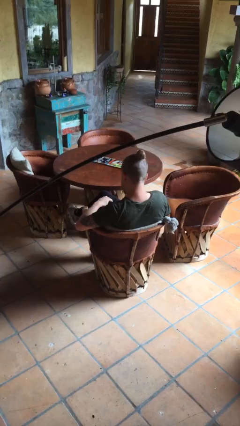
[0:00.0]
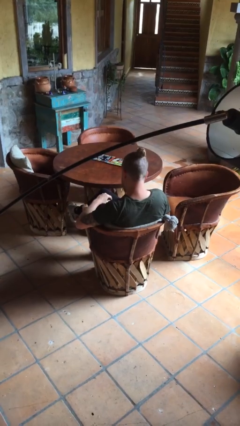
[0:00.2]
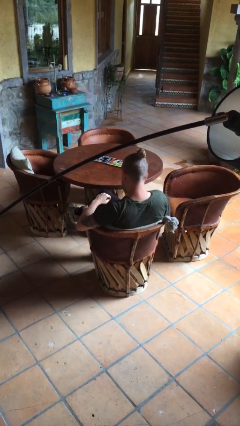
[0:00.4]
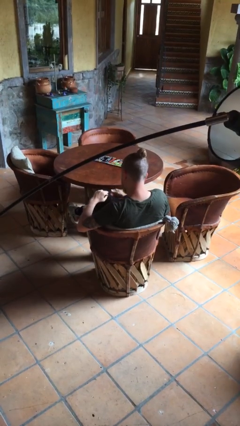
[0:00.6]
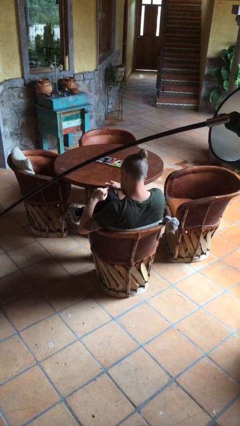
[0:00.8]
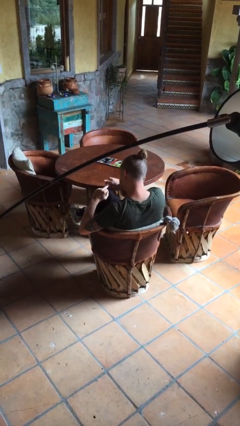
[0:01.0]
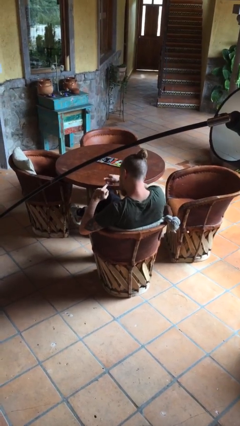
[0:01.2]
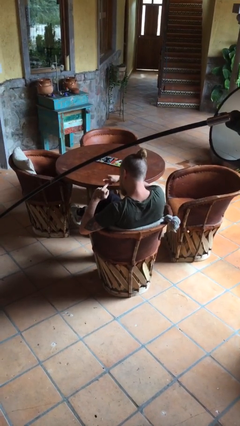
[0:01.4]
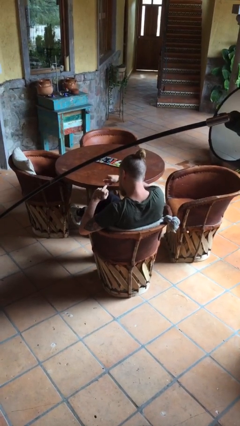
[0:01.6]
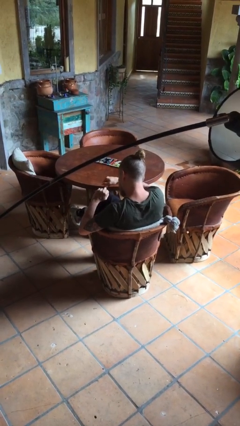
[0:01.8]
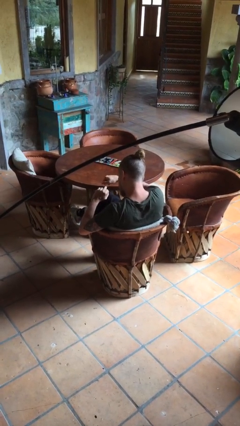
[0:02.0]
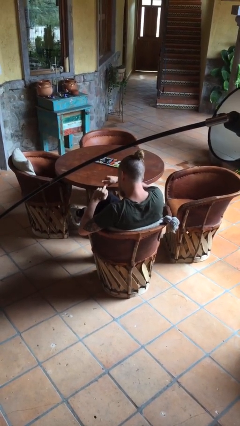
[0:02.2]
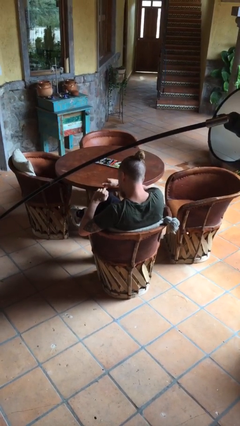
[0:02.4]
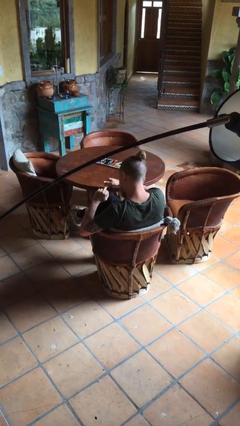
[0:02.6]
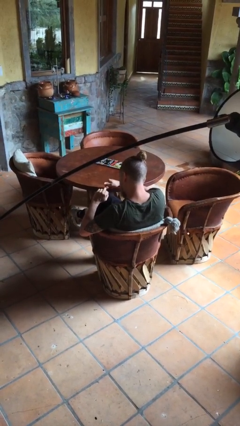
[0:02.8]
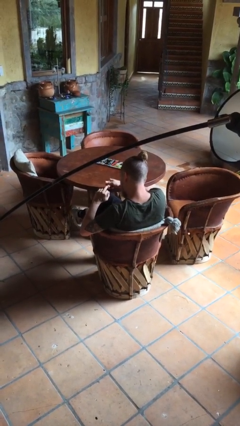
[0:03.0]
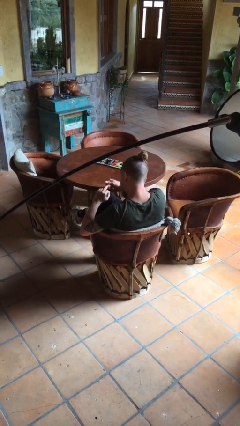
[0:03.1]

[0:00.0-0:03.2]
person clips fingernails

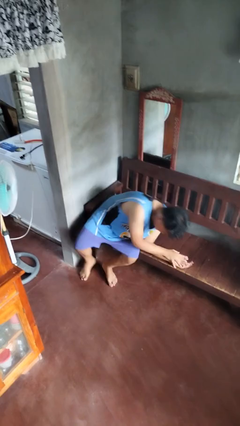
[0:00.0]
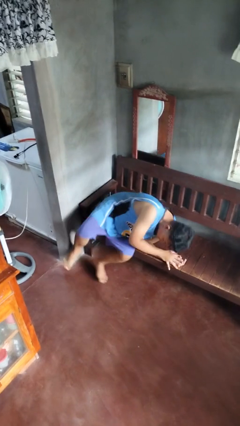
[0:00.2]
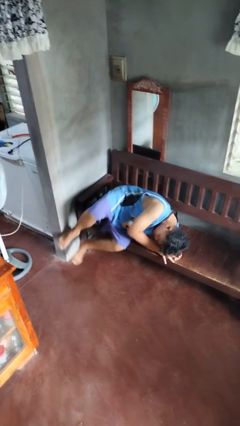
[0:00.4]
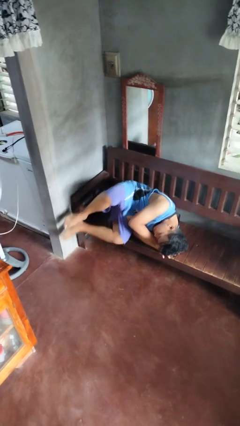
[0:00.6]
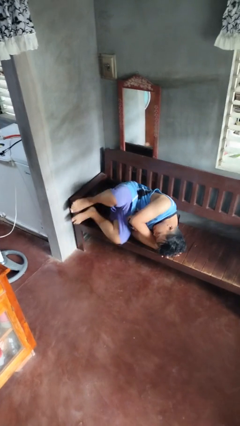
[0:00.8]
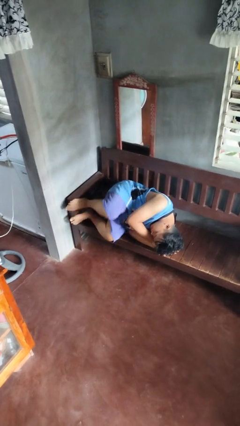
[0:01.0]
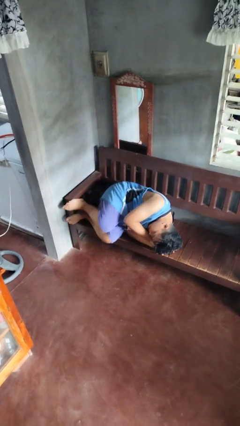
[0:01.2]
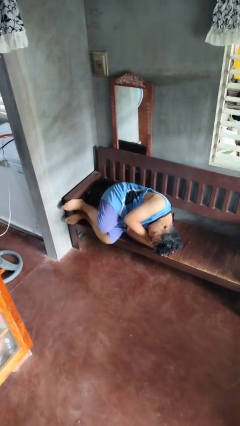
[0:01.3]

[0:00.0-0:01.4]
person lies down on couch

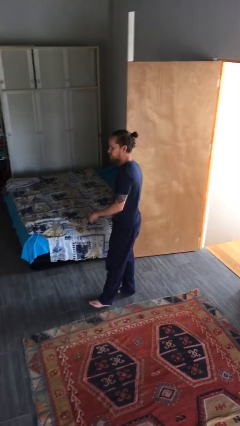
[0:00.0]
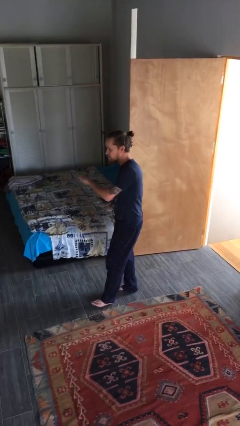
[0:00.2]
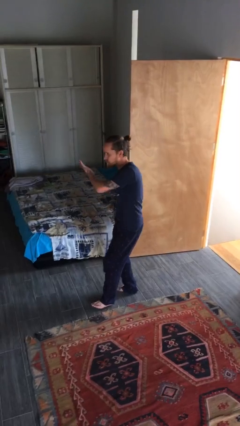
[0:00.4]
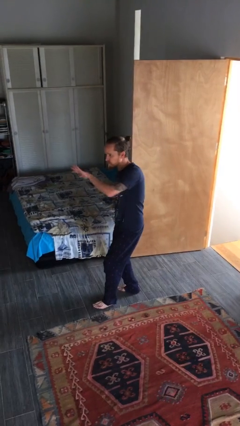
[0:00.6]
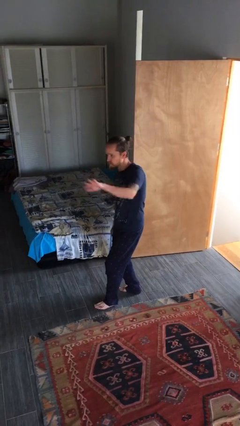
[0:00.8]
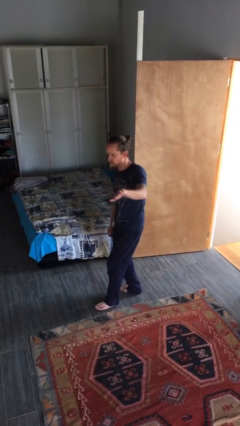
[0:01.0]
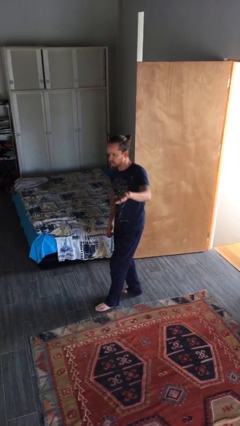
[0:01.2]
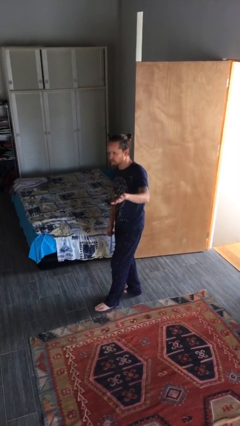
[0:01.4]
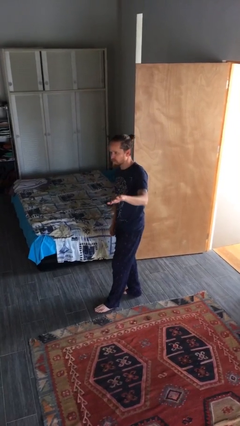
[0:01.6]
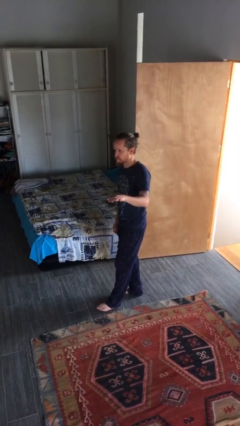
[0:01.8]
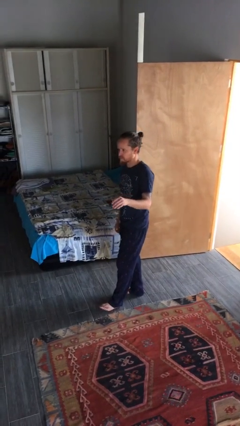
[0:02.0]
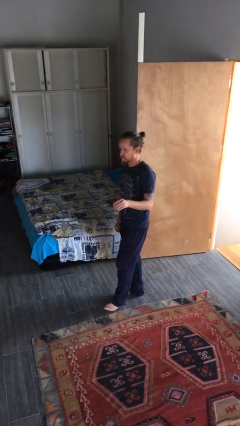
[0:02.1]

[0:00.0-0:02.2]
person gestures swipe left

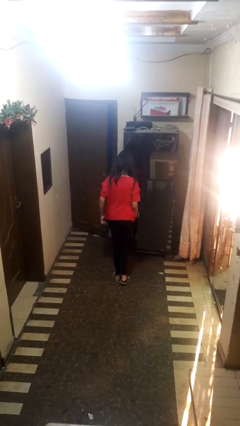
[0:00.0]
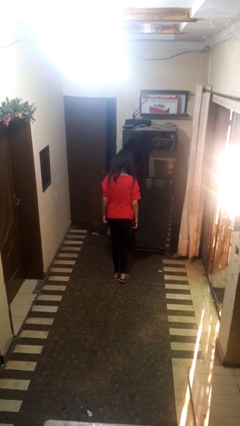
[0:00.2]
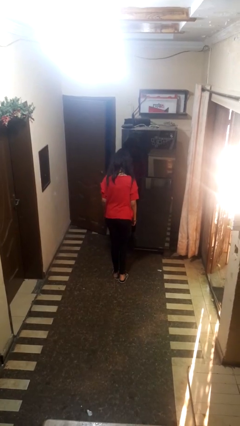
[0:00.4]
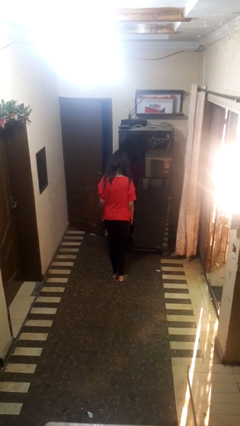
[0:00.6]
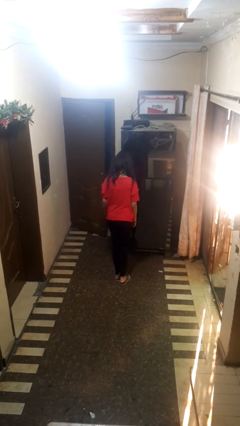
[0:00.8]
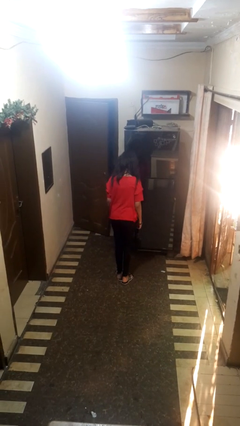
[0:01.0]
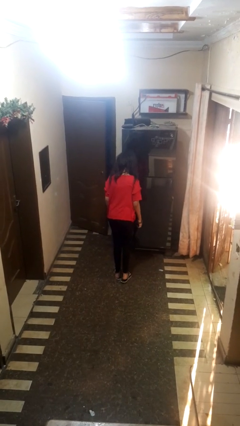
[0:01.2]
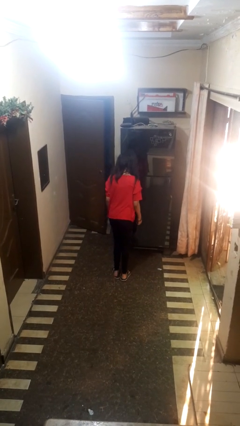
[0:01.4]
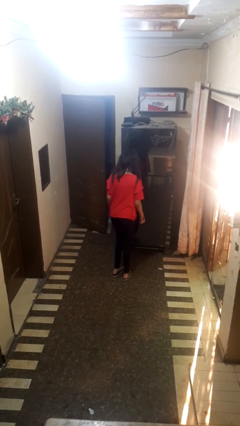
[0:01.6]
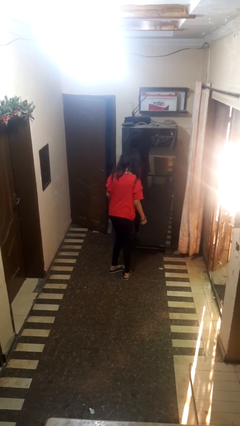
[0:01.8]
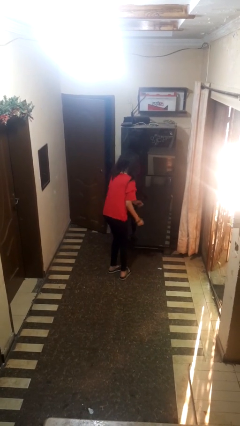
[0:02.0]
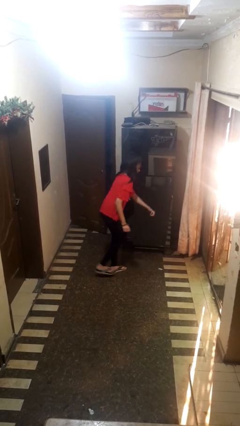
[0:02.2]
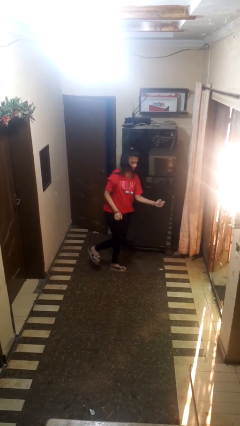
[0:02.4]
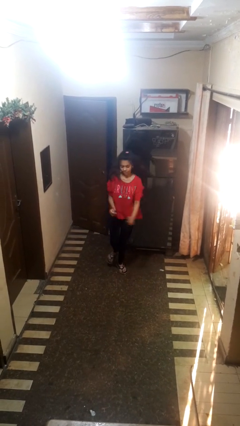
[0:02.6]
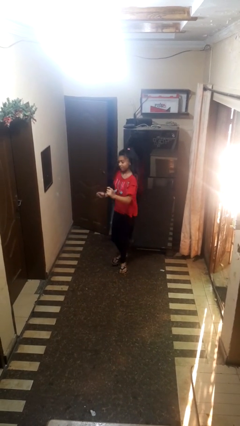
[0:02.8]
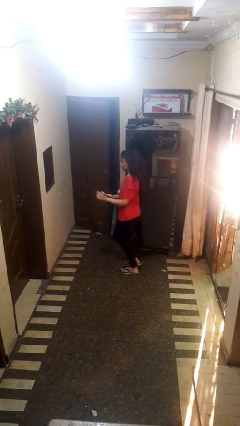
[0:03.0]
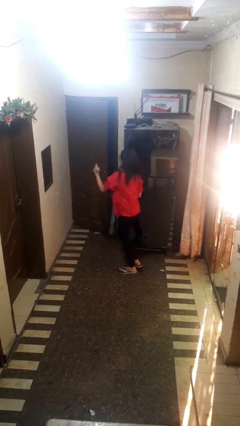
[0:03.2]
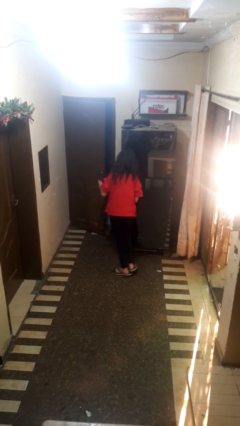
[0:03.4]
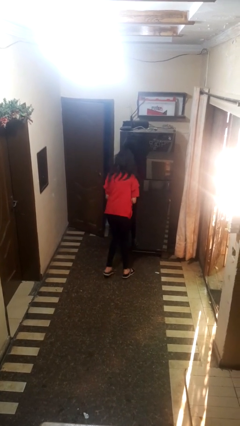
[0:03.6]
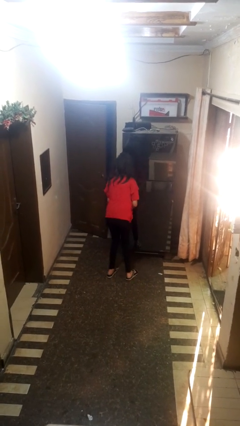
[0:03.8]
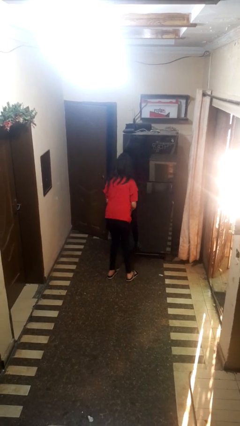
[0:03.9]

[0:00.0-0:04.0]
person twirls

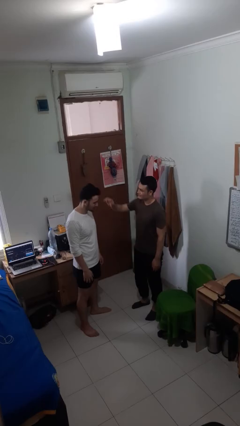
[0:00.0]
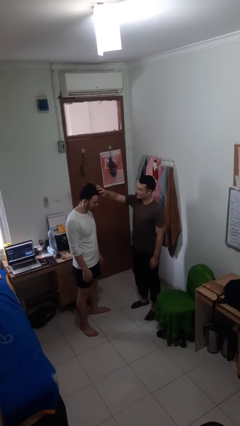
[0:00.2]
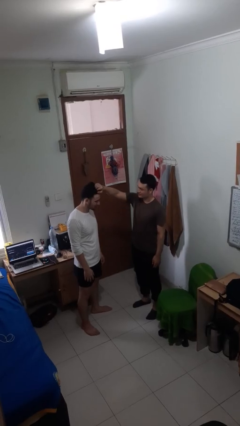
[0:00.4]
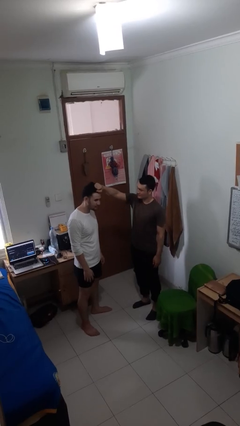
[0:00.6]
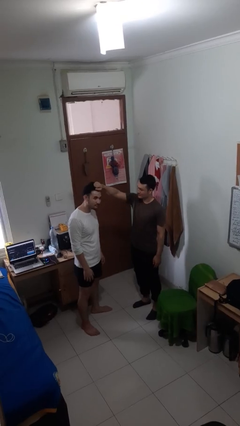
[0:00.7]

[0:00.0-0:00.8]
person grabs person by hair

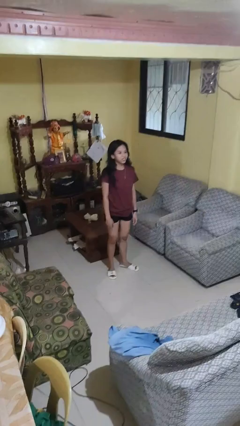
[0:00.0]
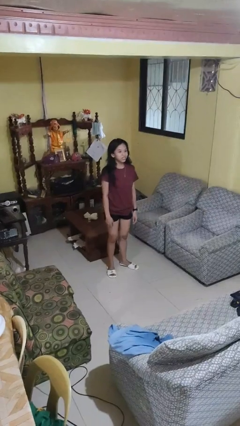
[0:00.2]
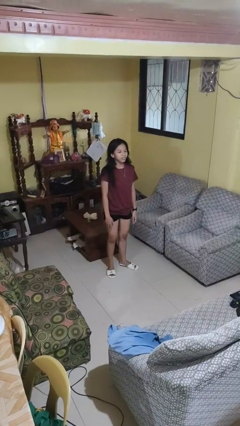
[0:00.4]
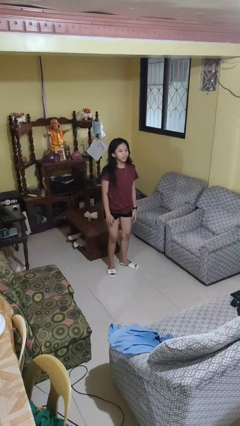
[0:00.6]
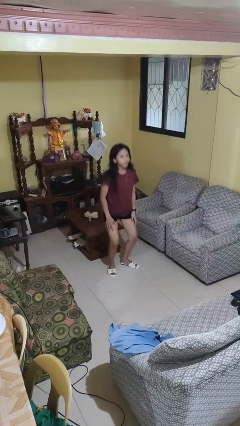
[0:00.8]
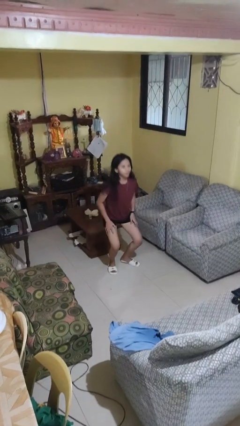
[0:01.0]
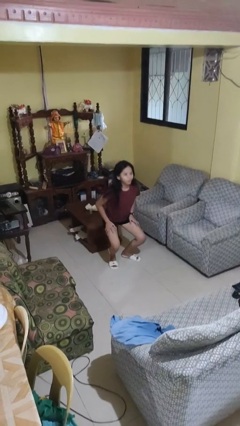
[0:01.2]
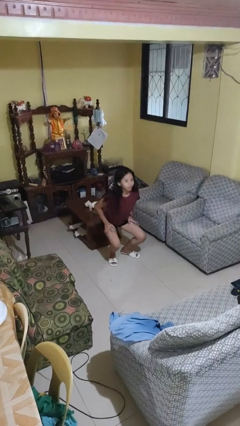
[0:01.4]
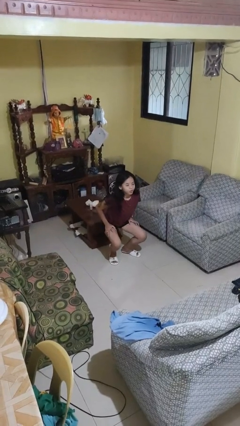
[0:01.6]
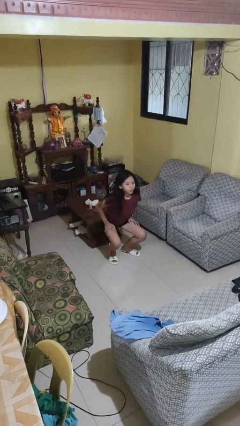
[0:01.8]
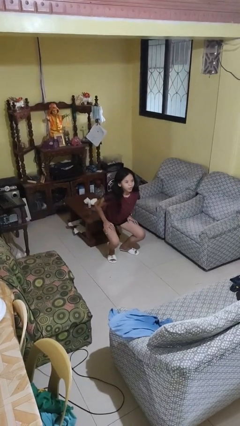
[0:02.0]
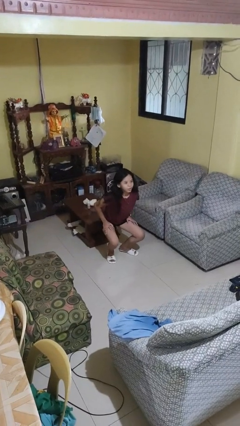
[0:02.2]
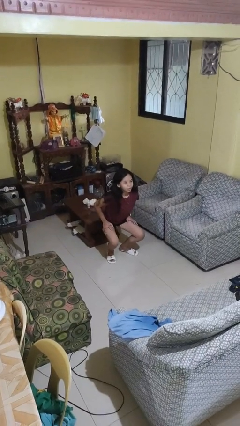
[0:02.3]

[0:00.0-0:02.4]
person squats

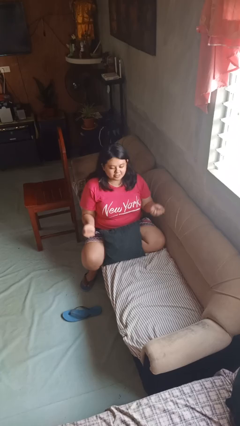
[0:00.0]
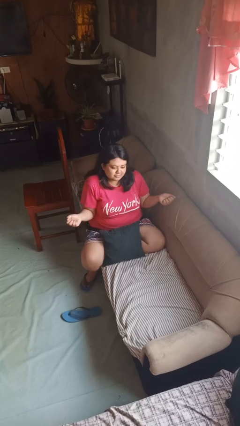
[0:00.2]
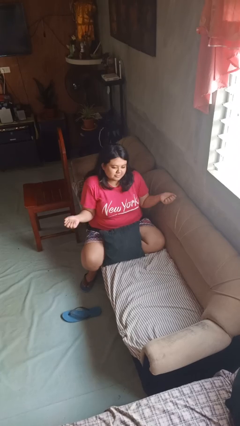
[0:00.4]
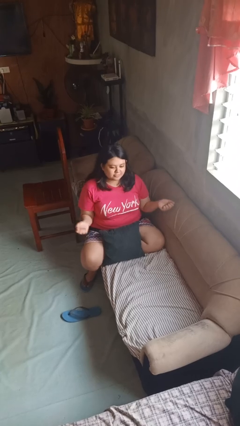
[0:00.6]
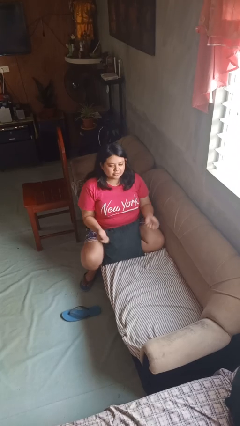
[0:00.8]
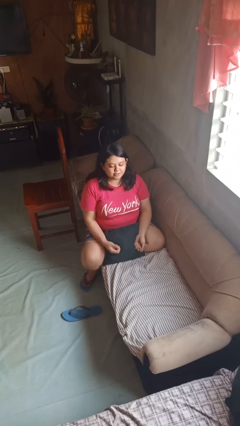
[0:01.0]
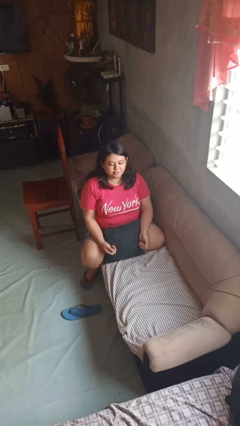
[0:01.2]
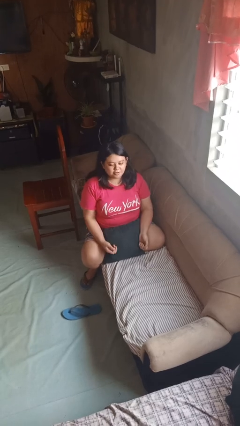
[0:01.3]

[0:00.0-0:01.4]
person shrugs

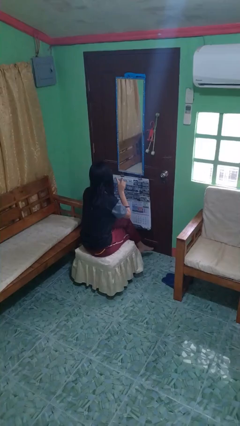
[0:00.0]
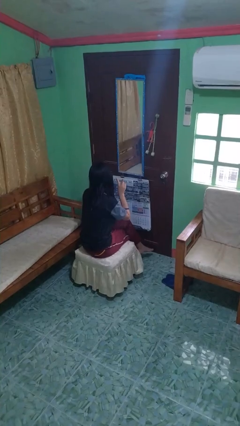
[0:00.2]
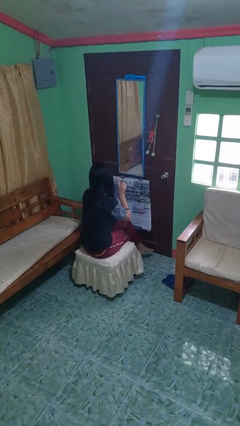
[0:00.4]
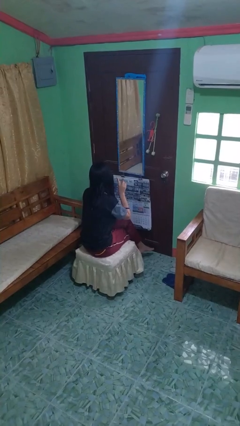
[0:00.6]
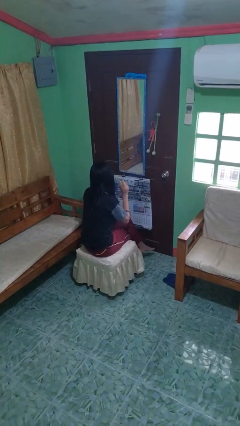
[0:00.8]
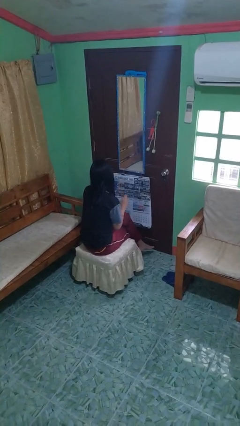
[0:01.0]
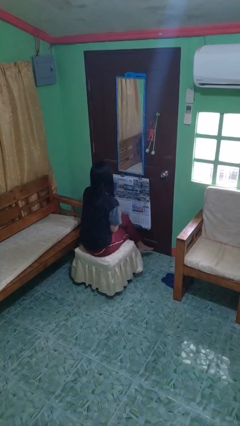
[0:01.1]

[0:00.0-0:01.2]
person gestures peace

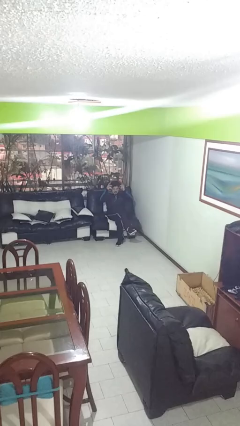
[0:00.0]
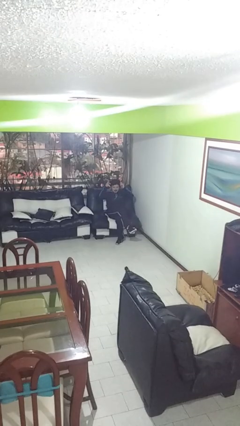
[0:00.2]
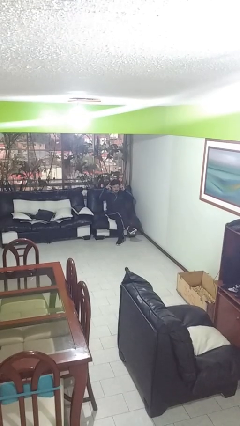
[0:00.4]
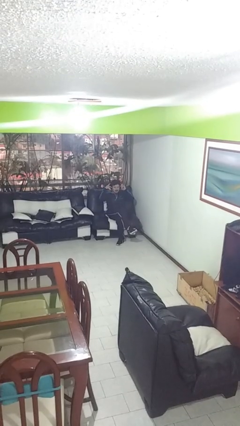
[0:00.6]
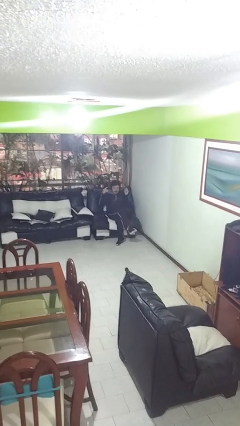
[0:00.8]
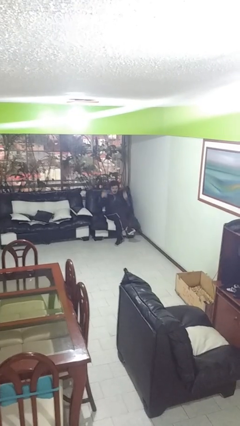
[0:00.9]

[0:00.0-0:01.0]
person puts on headphones
